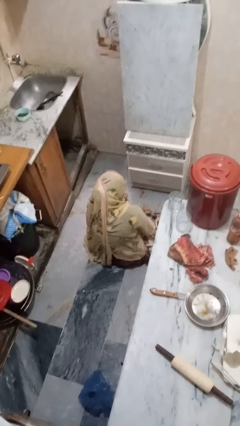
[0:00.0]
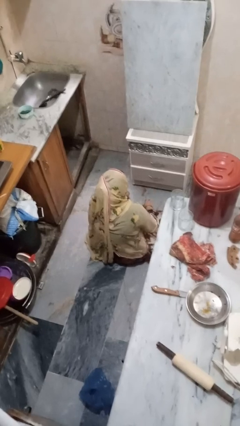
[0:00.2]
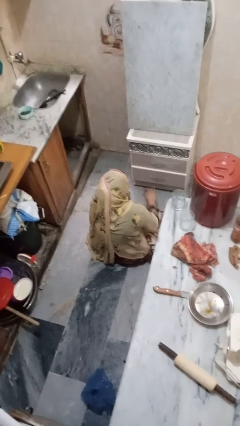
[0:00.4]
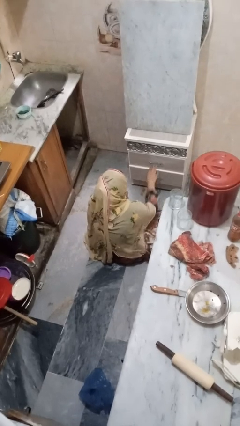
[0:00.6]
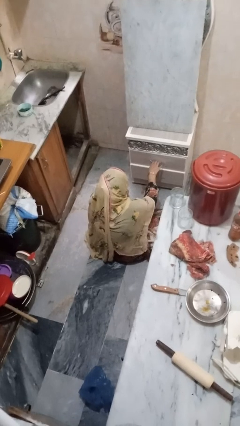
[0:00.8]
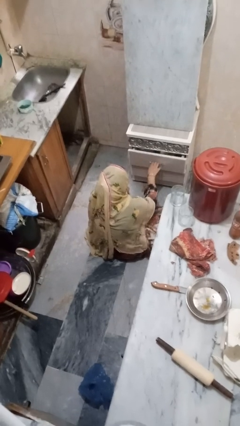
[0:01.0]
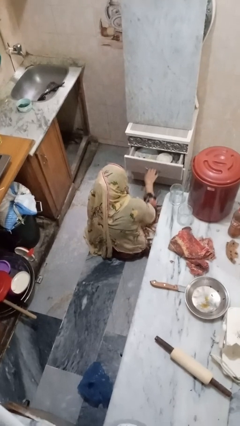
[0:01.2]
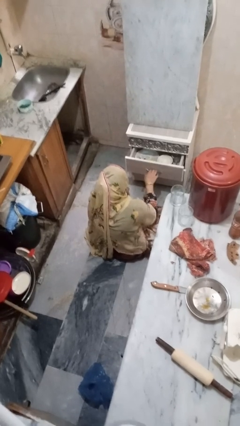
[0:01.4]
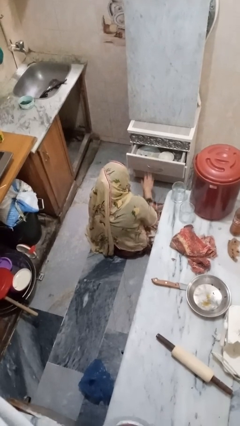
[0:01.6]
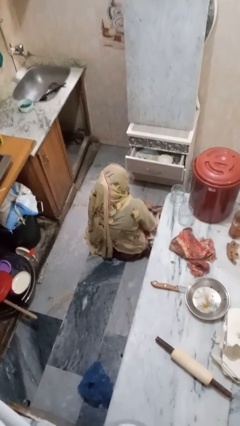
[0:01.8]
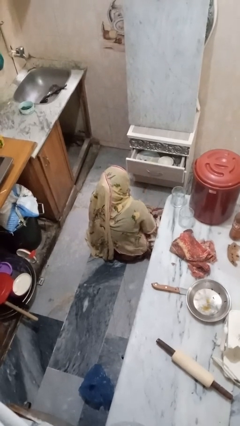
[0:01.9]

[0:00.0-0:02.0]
person opens kitchen drawer

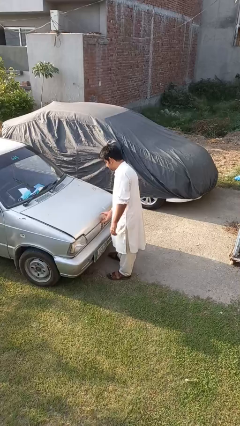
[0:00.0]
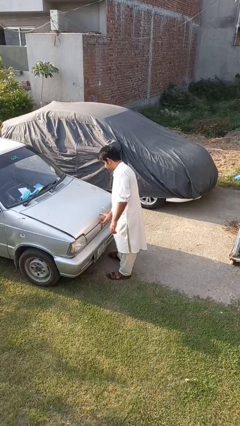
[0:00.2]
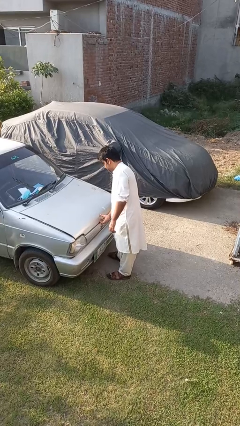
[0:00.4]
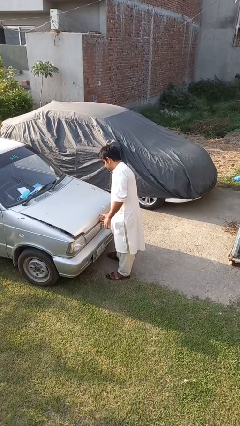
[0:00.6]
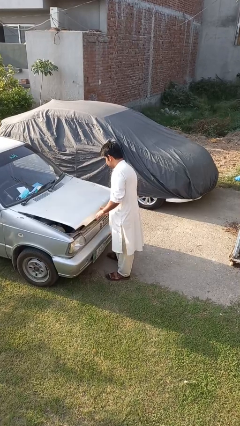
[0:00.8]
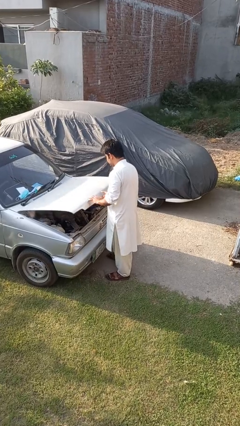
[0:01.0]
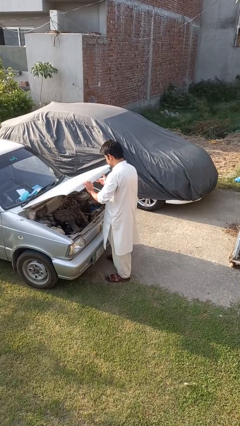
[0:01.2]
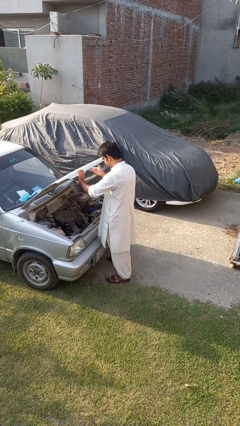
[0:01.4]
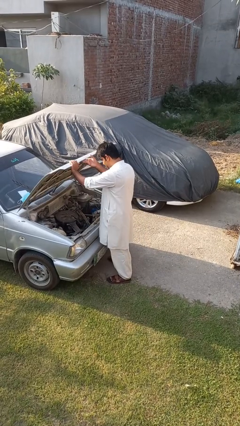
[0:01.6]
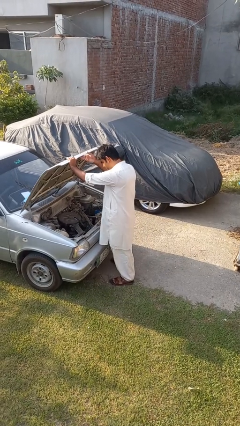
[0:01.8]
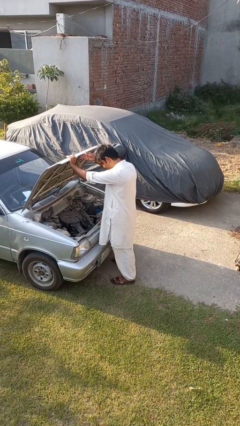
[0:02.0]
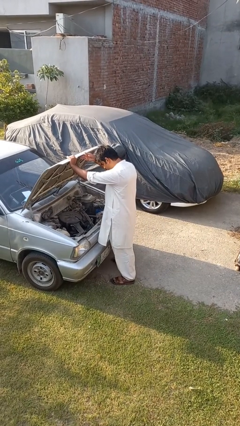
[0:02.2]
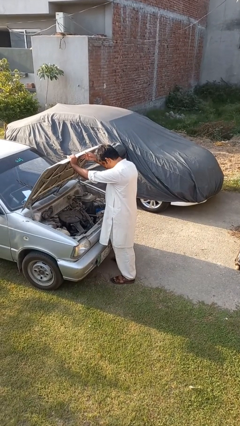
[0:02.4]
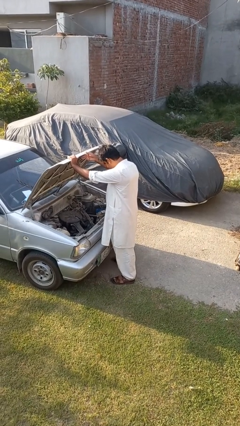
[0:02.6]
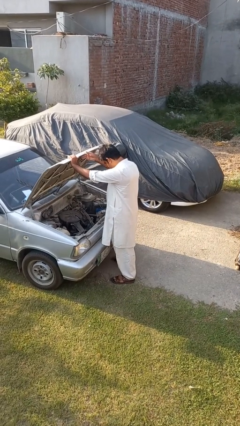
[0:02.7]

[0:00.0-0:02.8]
person opens car hood

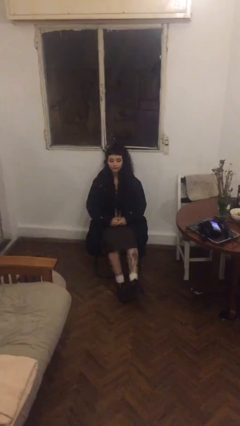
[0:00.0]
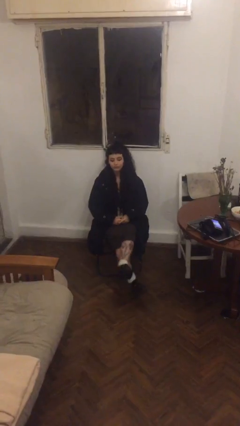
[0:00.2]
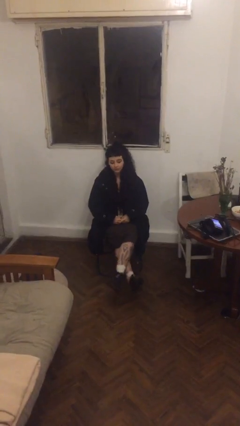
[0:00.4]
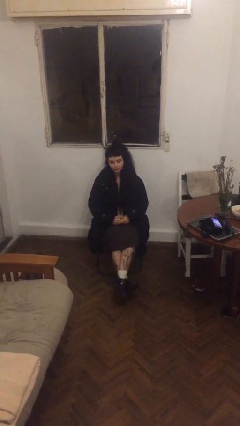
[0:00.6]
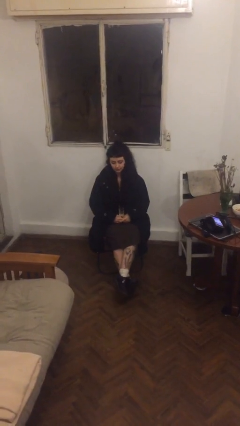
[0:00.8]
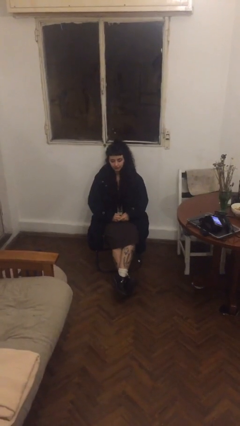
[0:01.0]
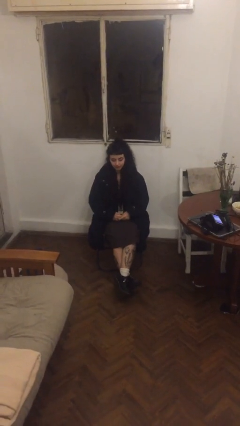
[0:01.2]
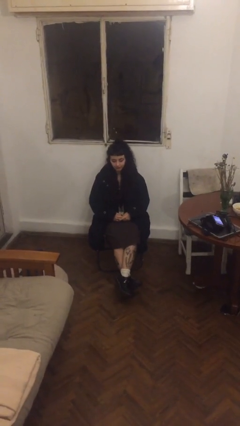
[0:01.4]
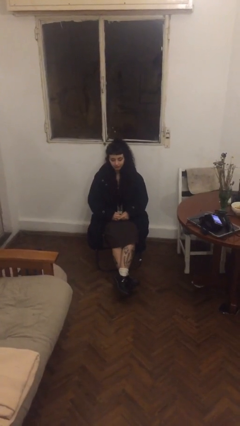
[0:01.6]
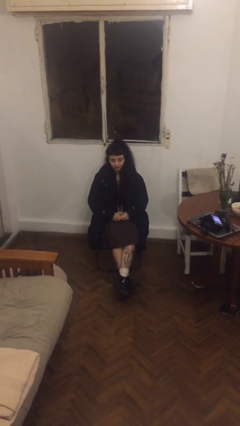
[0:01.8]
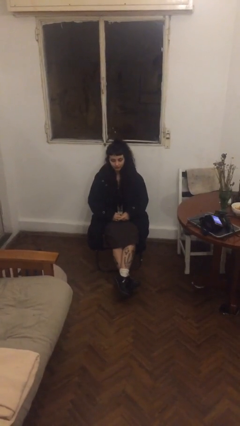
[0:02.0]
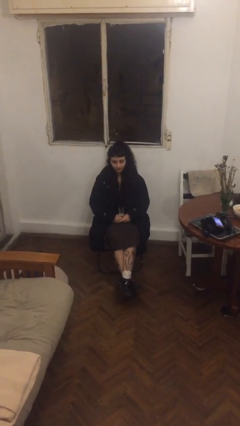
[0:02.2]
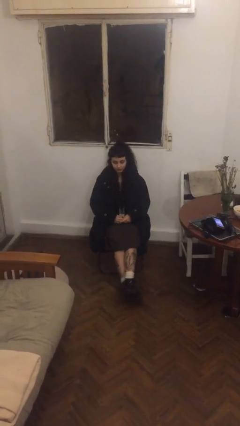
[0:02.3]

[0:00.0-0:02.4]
person crosses legs

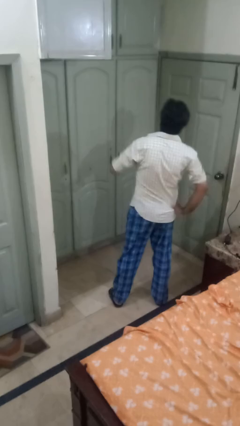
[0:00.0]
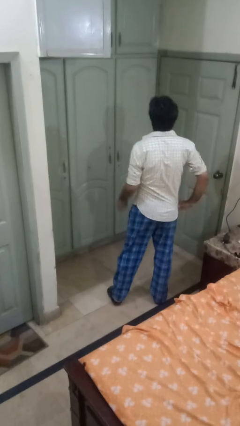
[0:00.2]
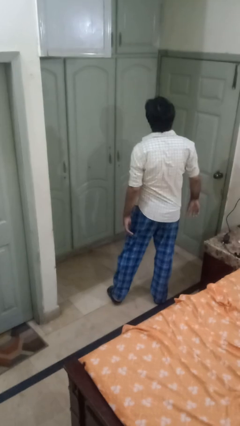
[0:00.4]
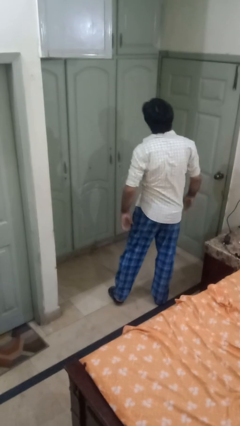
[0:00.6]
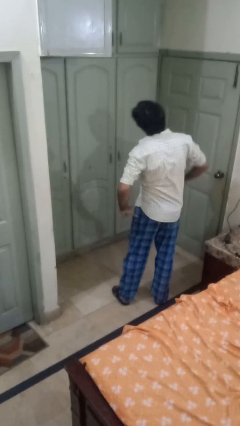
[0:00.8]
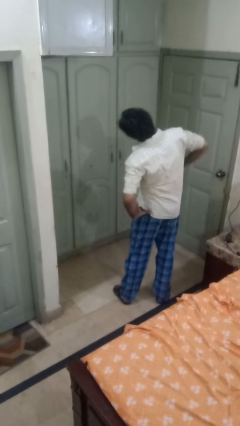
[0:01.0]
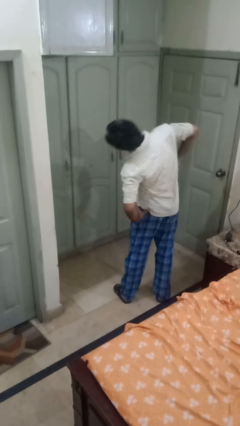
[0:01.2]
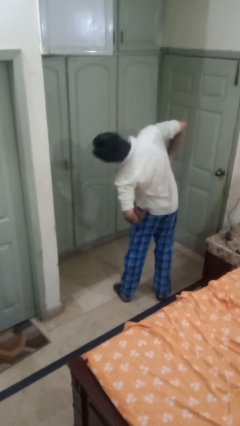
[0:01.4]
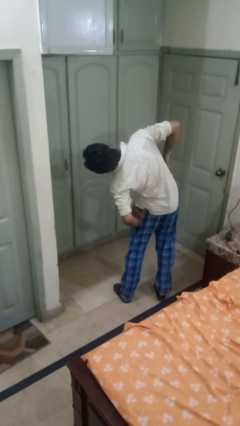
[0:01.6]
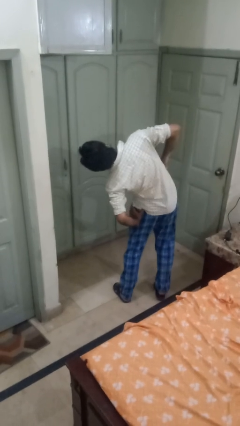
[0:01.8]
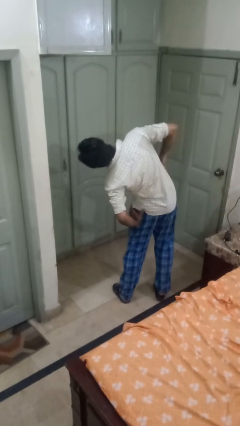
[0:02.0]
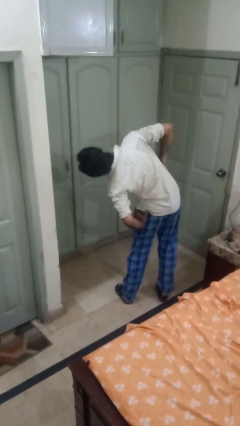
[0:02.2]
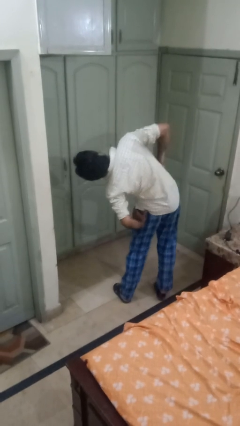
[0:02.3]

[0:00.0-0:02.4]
person stretches arms over head

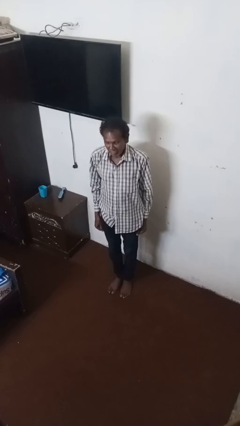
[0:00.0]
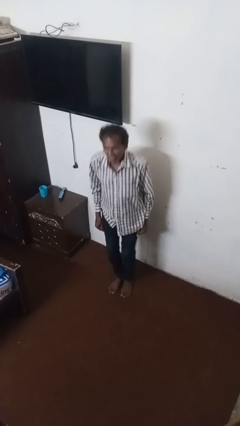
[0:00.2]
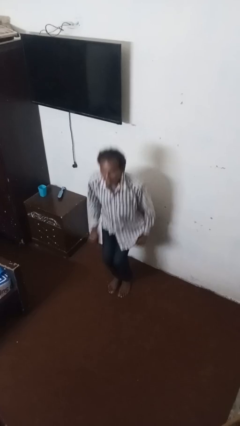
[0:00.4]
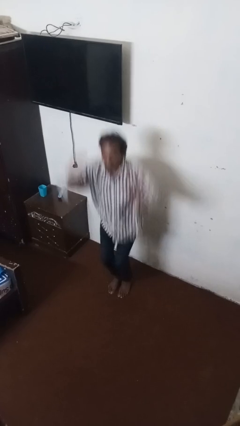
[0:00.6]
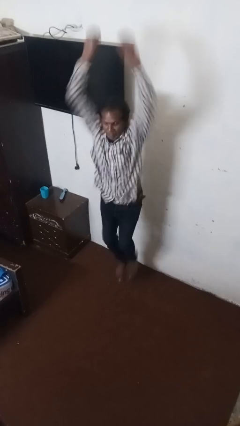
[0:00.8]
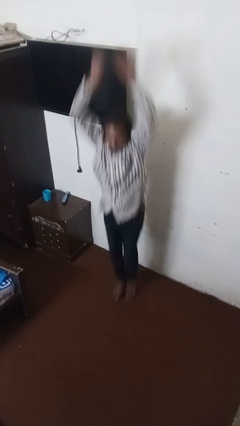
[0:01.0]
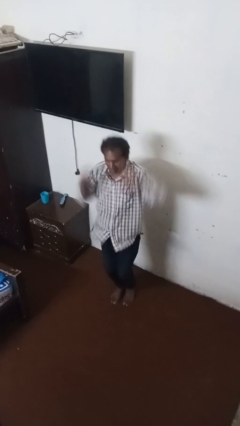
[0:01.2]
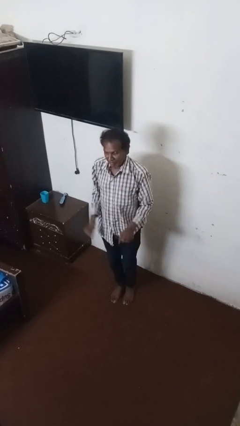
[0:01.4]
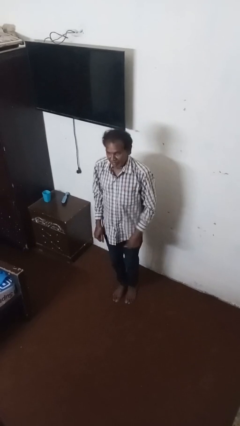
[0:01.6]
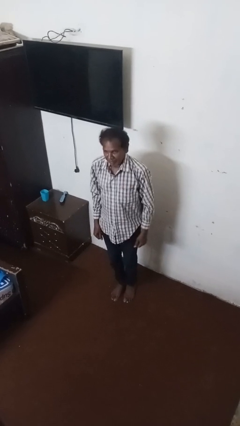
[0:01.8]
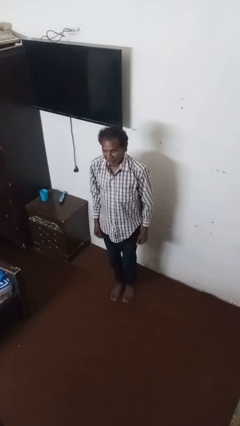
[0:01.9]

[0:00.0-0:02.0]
person jumps

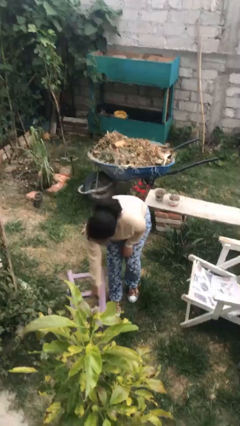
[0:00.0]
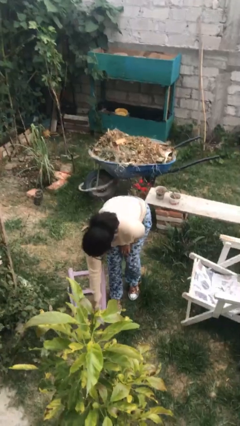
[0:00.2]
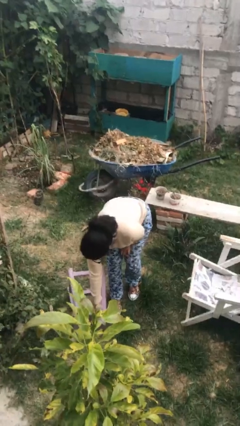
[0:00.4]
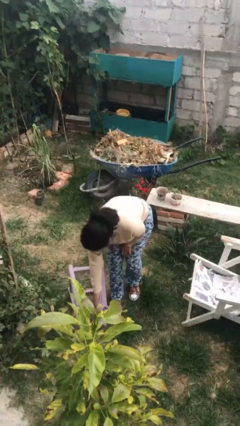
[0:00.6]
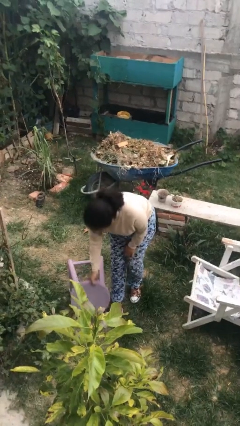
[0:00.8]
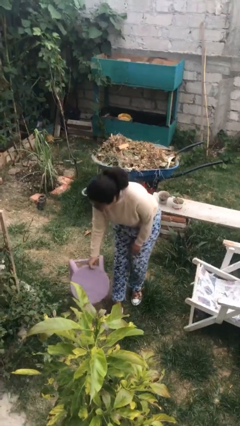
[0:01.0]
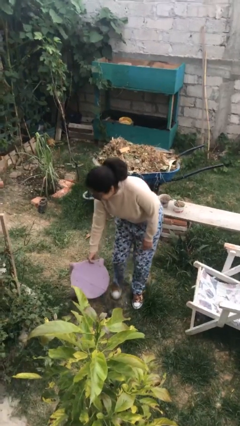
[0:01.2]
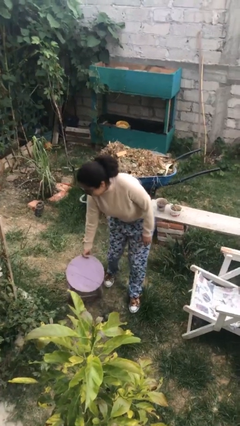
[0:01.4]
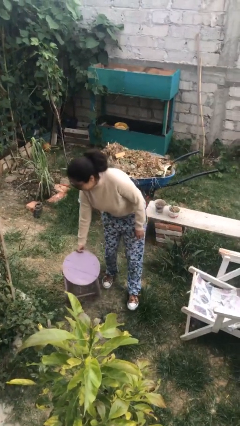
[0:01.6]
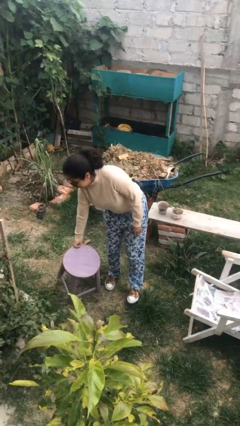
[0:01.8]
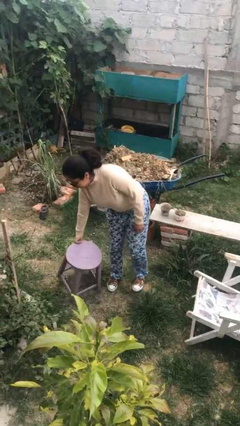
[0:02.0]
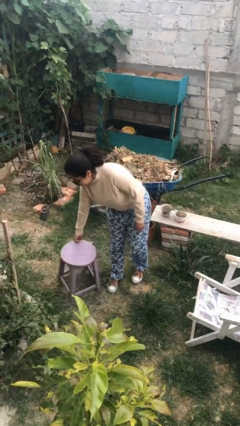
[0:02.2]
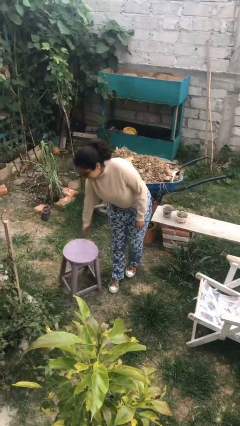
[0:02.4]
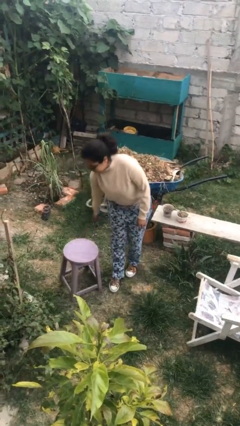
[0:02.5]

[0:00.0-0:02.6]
person sets upright furniture

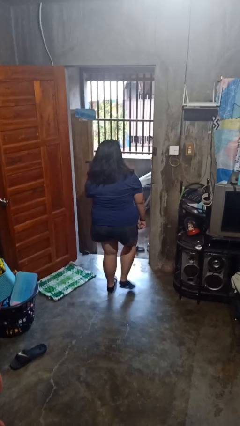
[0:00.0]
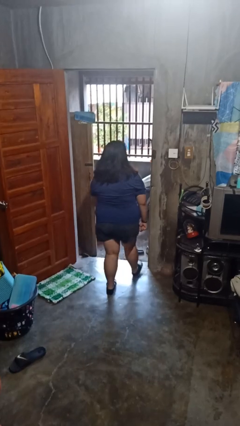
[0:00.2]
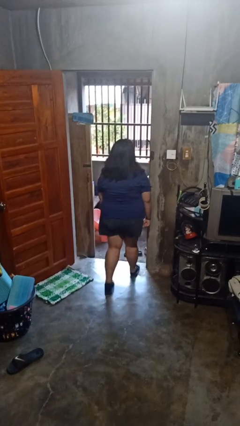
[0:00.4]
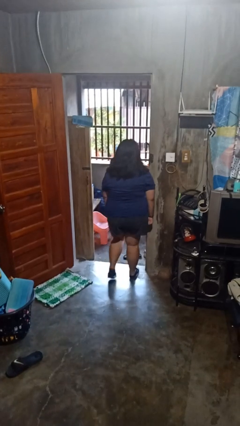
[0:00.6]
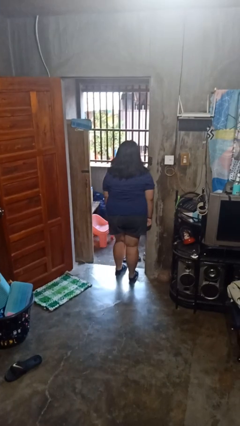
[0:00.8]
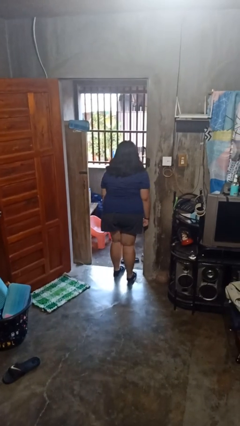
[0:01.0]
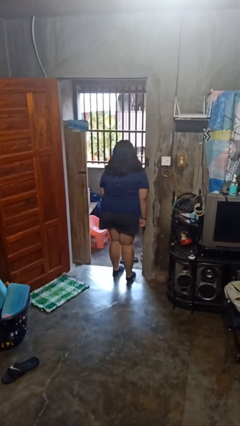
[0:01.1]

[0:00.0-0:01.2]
person bumps into wall

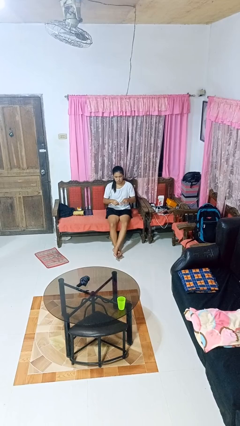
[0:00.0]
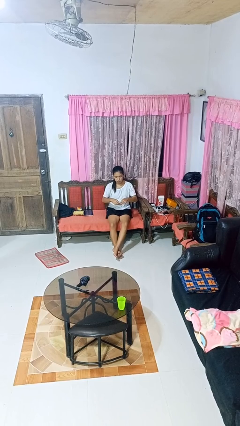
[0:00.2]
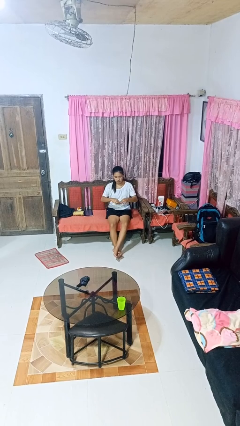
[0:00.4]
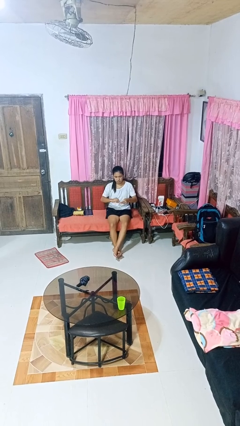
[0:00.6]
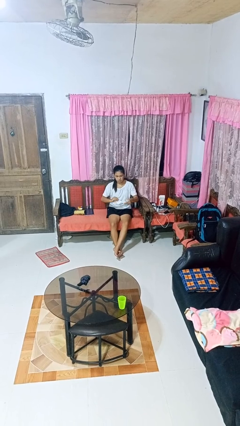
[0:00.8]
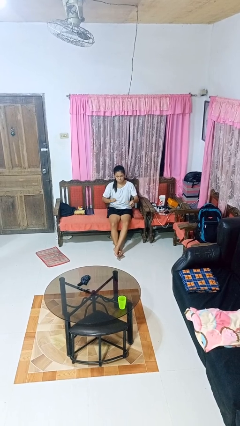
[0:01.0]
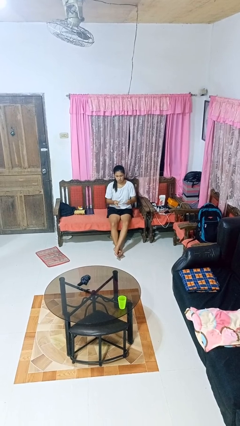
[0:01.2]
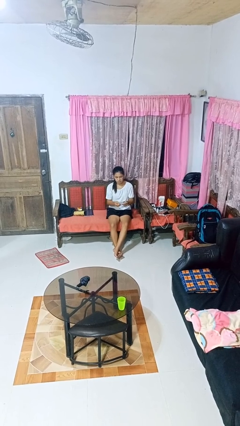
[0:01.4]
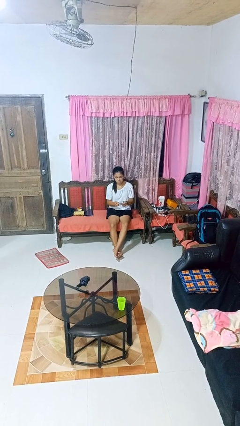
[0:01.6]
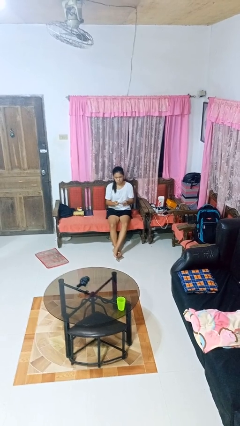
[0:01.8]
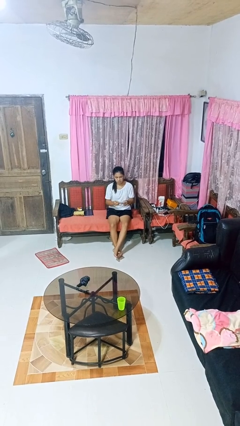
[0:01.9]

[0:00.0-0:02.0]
person tears paper
